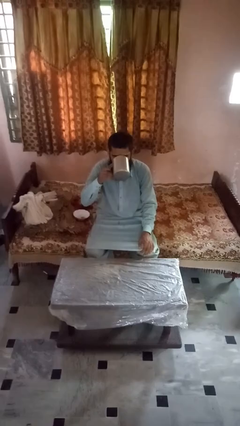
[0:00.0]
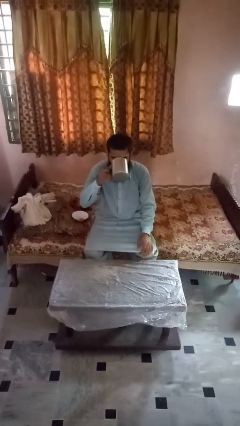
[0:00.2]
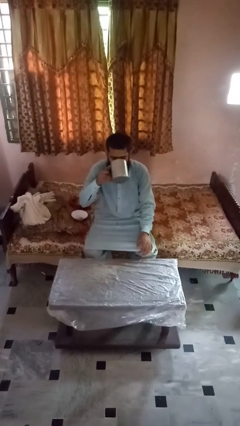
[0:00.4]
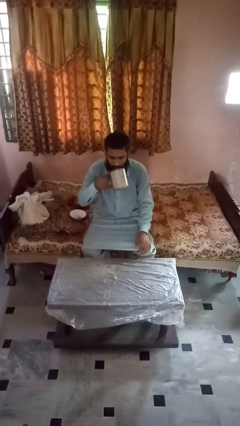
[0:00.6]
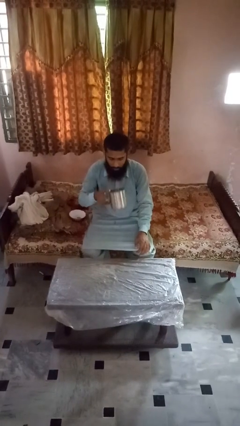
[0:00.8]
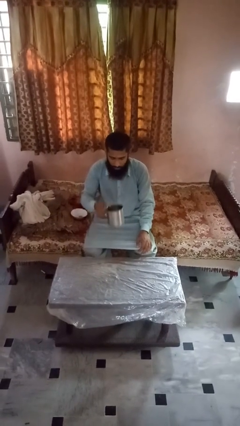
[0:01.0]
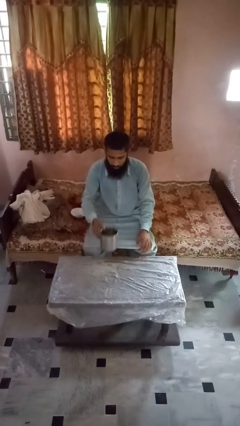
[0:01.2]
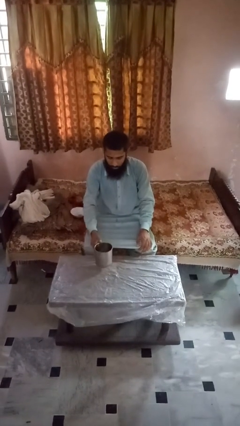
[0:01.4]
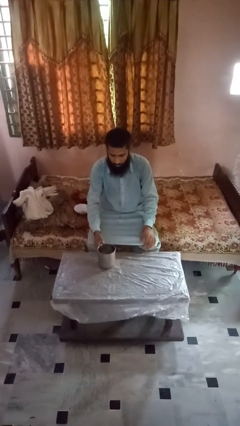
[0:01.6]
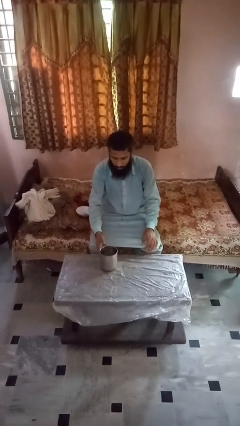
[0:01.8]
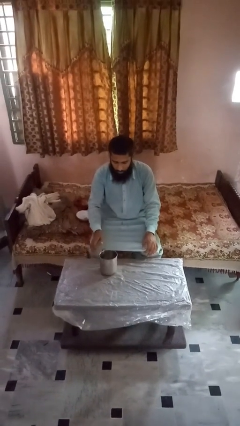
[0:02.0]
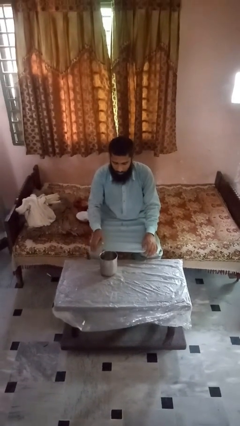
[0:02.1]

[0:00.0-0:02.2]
person puts down object on table

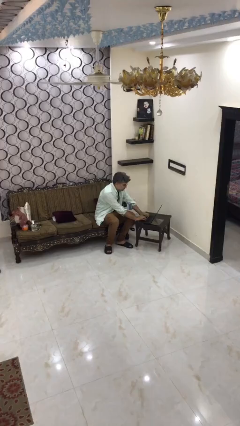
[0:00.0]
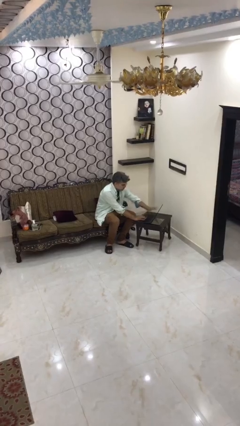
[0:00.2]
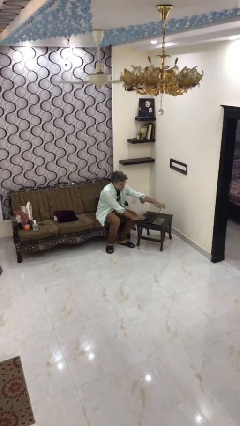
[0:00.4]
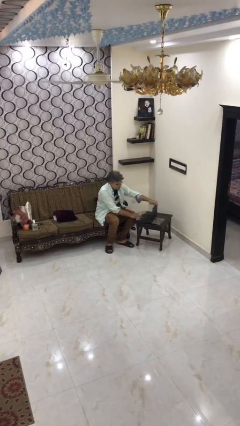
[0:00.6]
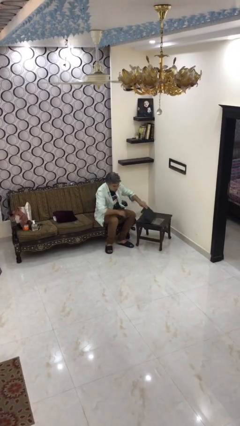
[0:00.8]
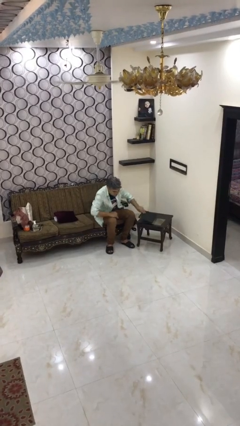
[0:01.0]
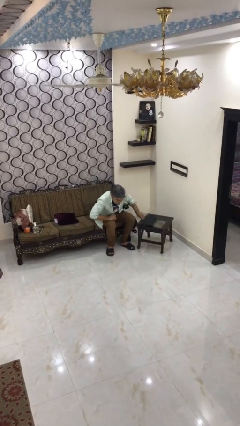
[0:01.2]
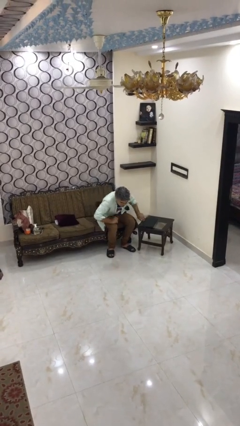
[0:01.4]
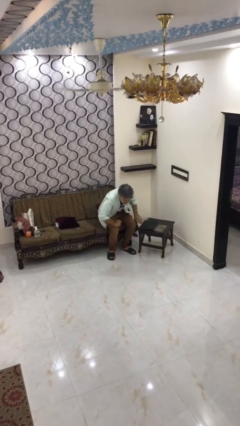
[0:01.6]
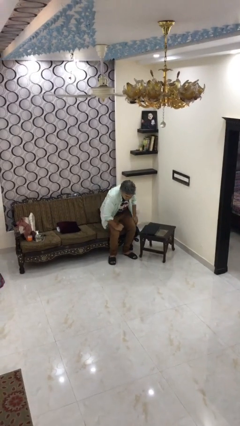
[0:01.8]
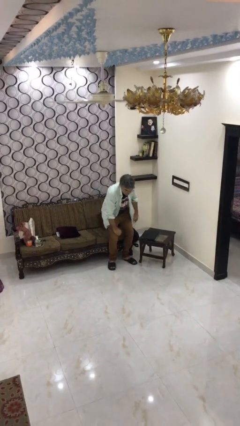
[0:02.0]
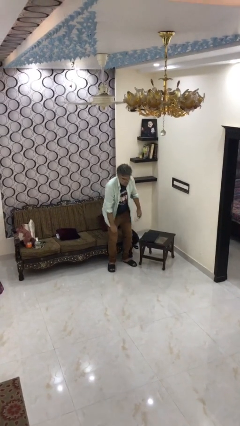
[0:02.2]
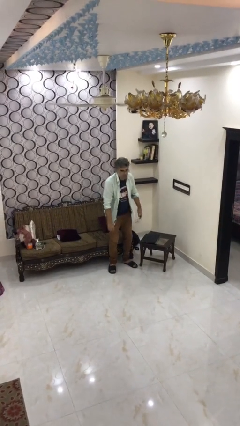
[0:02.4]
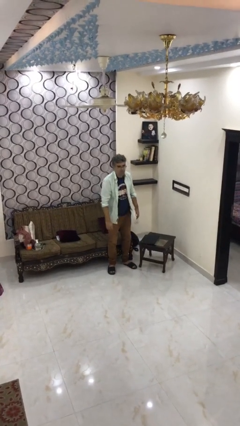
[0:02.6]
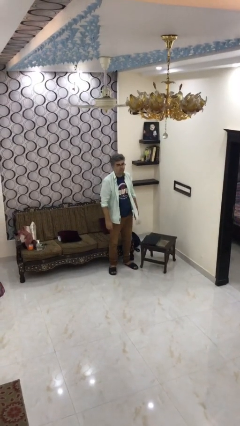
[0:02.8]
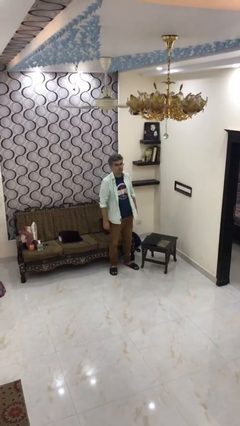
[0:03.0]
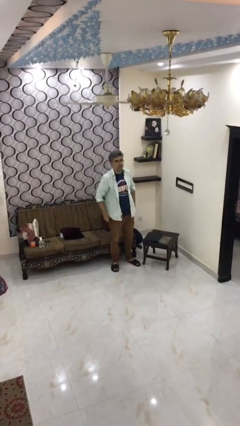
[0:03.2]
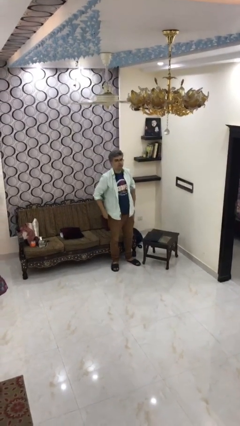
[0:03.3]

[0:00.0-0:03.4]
person stands up

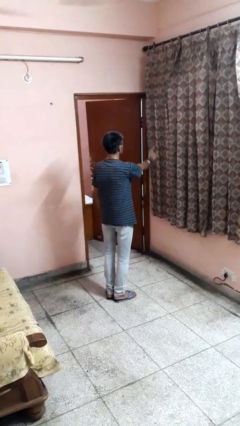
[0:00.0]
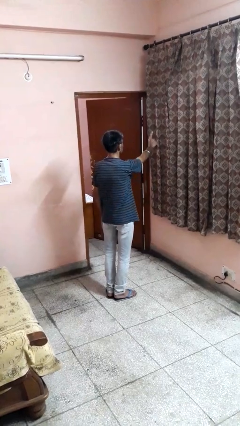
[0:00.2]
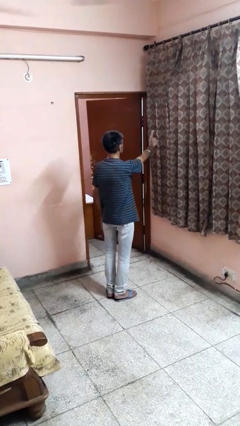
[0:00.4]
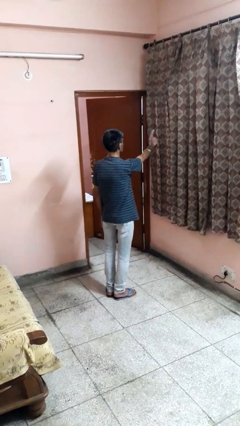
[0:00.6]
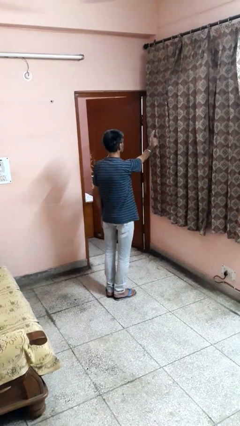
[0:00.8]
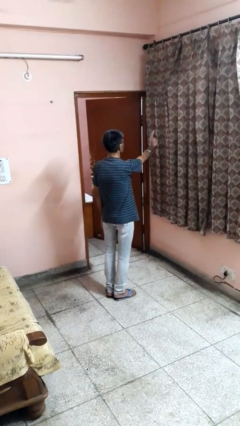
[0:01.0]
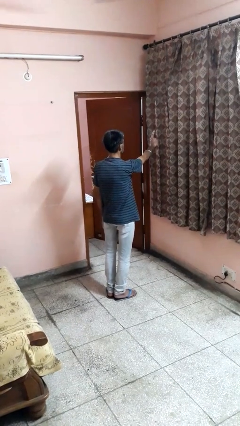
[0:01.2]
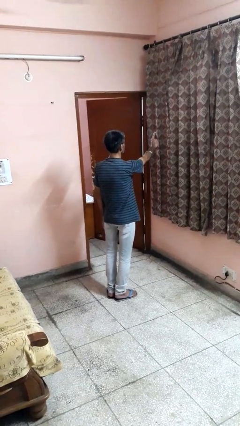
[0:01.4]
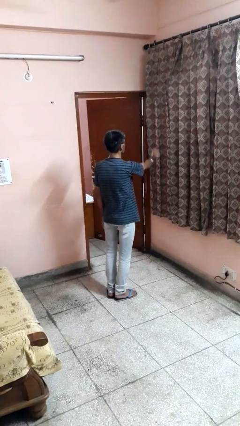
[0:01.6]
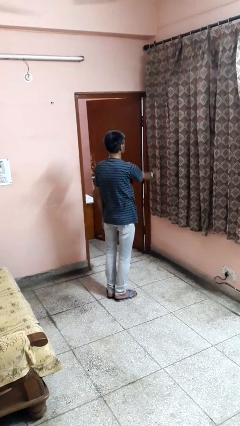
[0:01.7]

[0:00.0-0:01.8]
person gestures number one

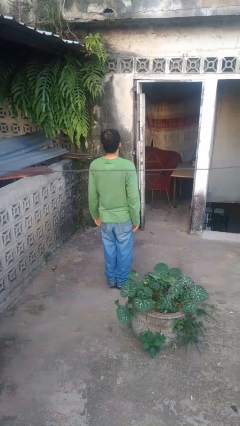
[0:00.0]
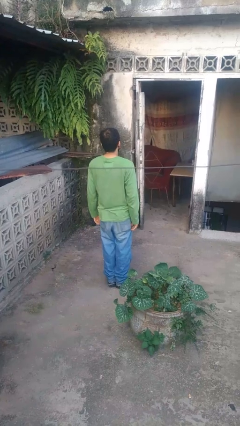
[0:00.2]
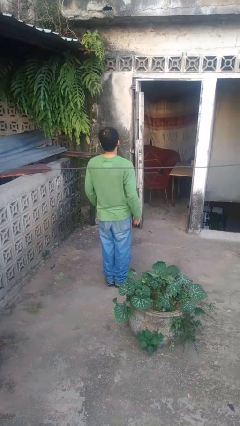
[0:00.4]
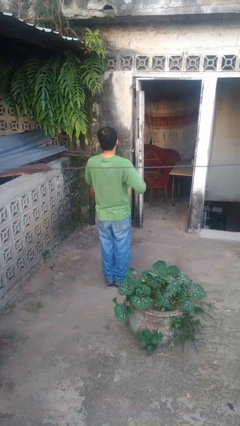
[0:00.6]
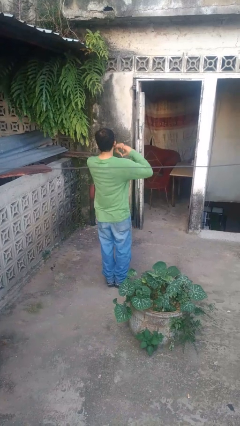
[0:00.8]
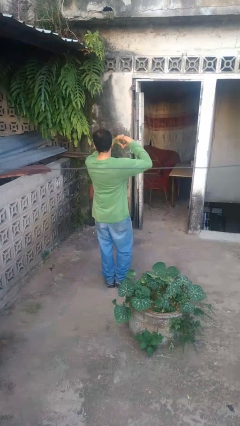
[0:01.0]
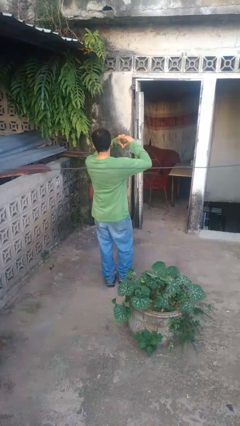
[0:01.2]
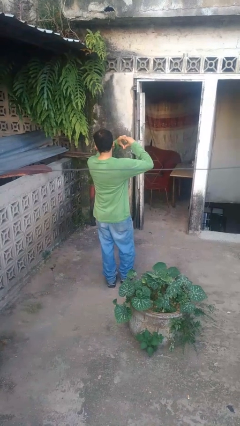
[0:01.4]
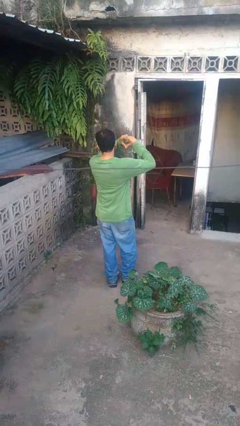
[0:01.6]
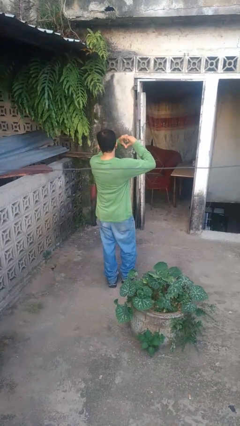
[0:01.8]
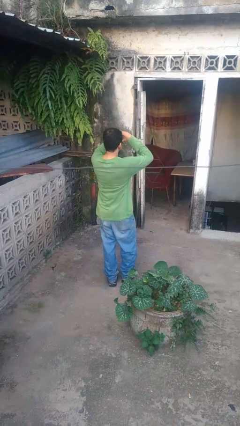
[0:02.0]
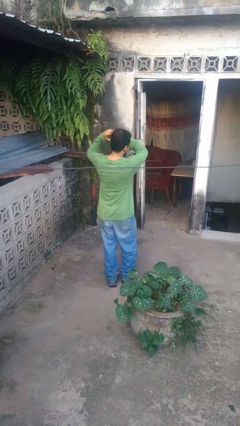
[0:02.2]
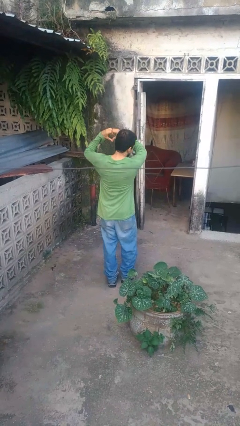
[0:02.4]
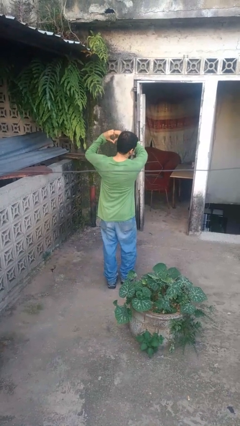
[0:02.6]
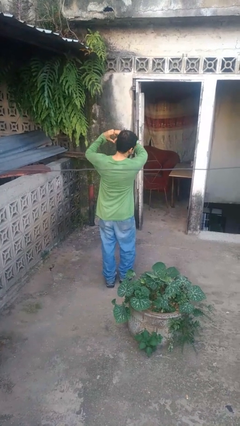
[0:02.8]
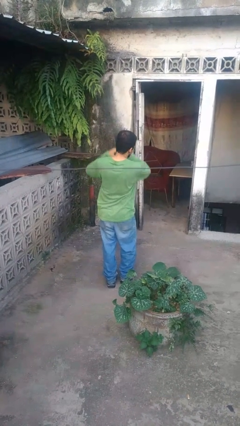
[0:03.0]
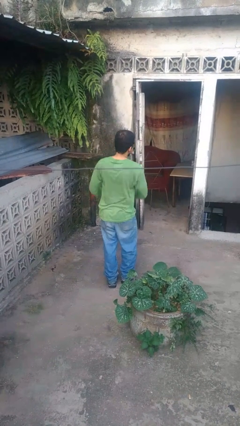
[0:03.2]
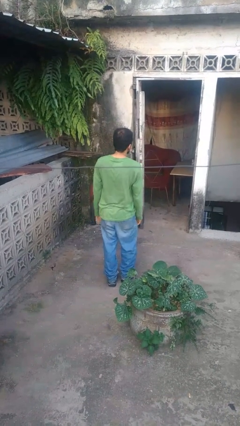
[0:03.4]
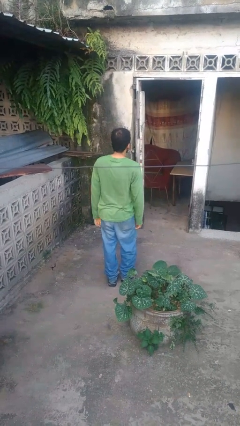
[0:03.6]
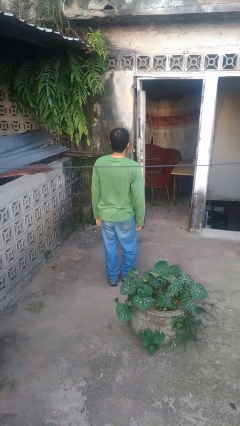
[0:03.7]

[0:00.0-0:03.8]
person gestures heart

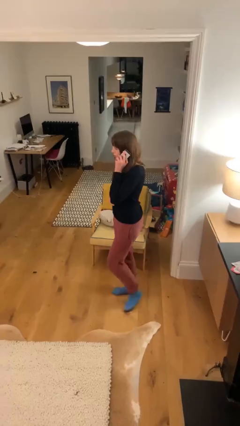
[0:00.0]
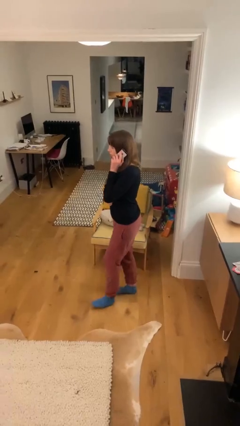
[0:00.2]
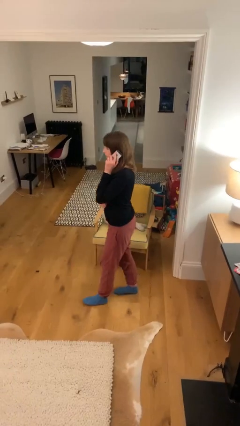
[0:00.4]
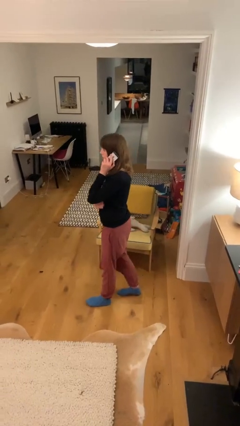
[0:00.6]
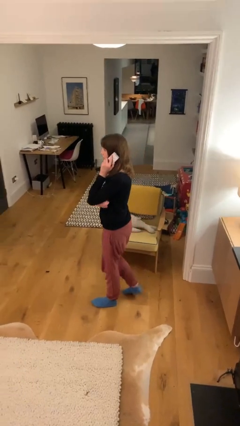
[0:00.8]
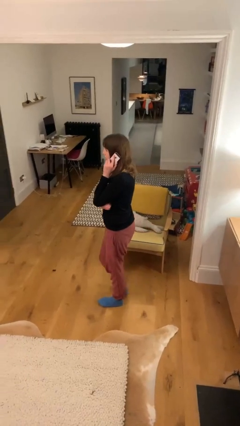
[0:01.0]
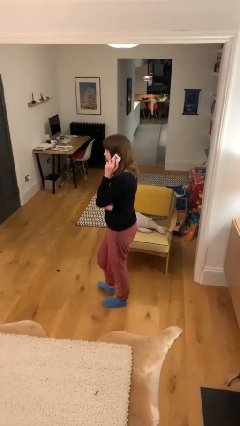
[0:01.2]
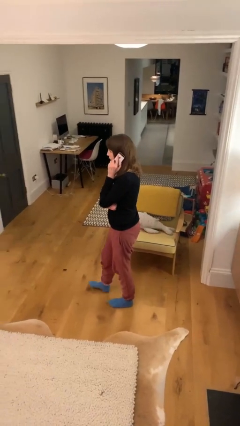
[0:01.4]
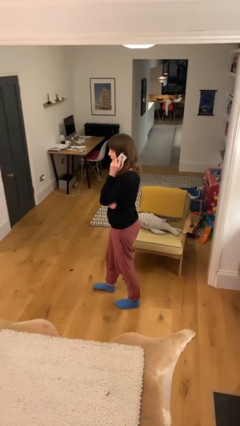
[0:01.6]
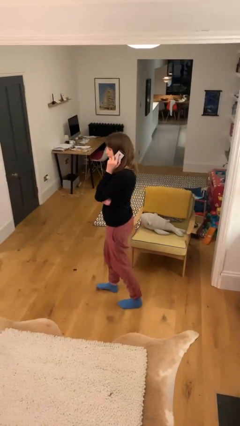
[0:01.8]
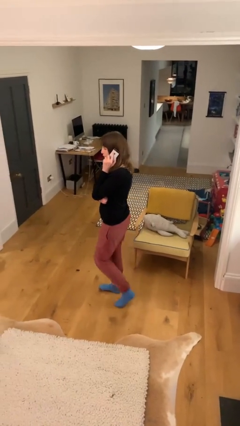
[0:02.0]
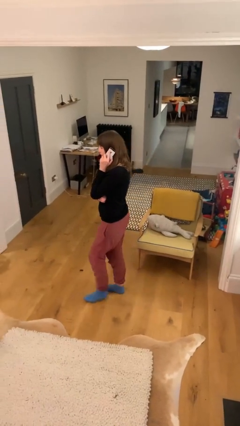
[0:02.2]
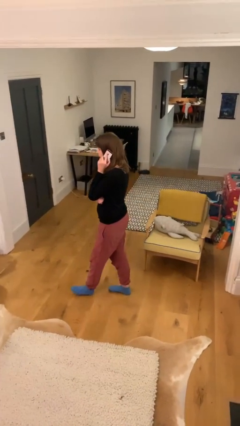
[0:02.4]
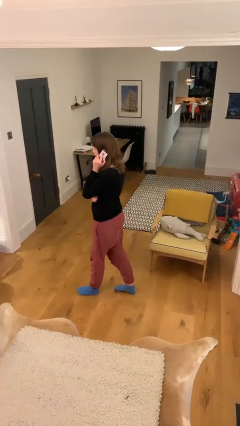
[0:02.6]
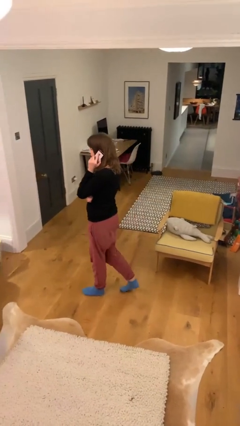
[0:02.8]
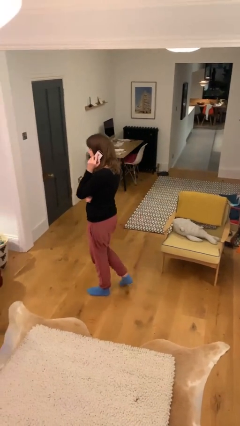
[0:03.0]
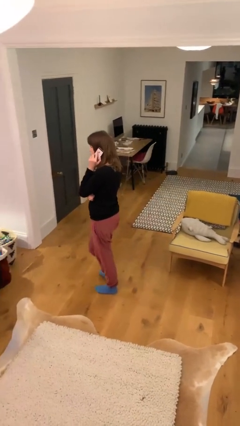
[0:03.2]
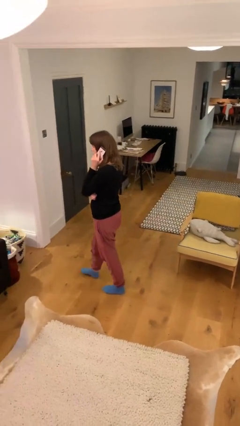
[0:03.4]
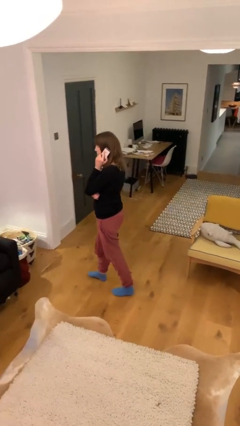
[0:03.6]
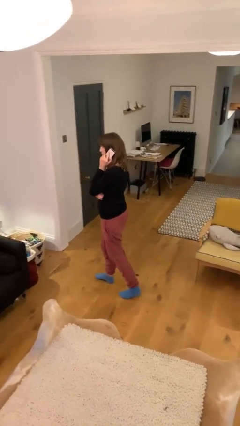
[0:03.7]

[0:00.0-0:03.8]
person talks on phone

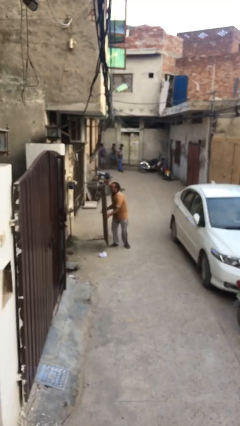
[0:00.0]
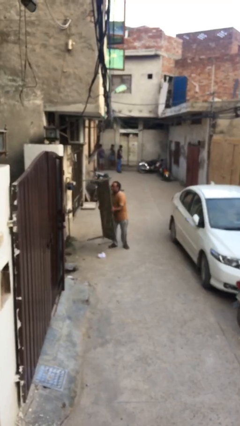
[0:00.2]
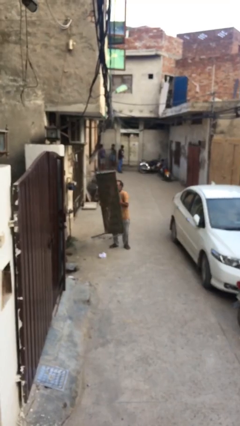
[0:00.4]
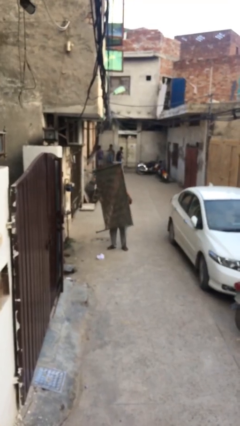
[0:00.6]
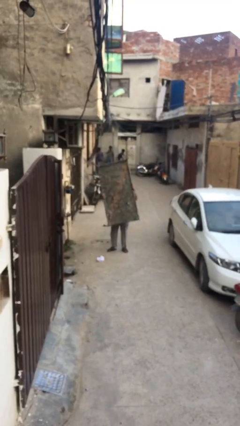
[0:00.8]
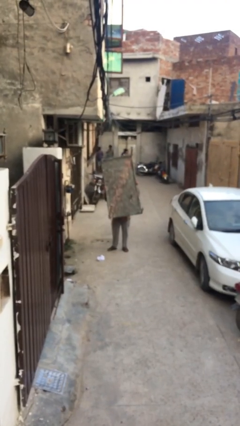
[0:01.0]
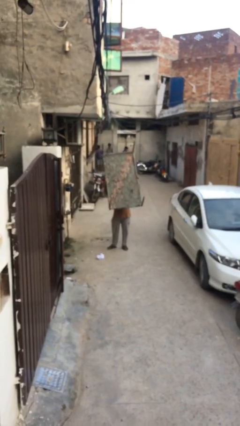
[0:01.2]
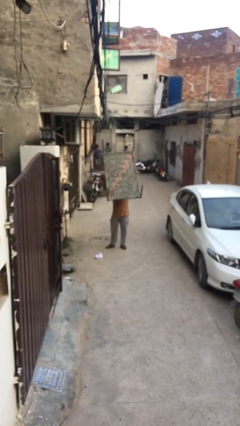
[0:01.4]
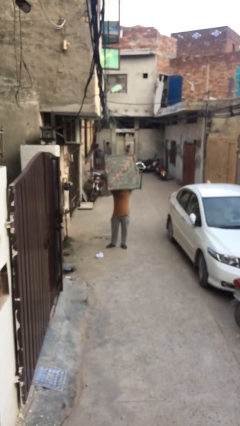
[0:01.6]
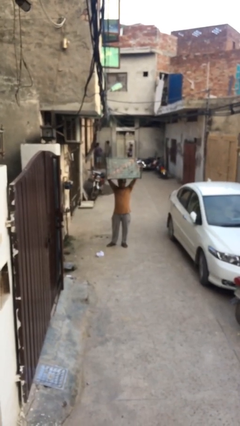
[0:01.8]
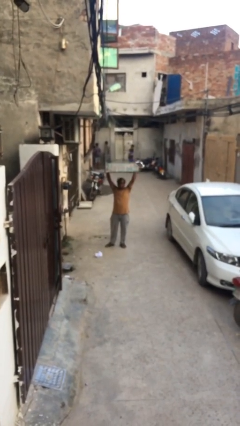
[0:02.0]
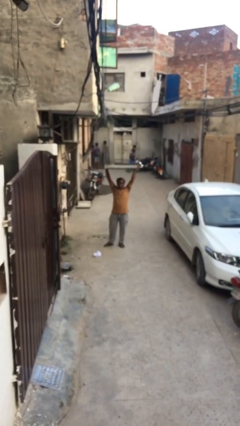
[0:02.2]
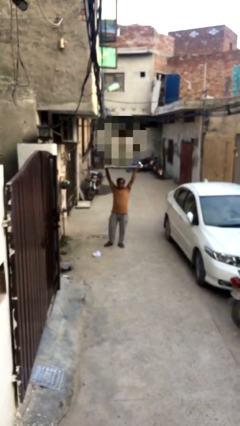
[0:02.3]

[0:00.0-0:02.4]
person picks up object from floor
